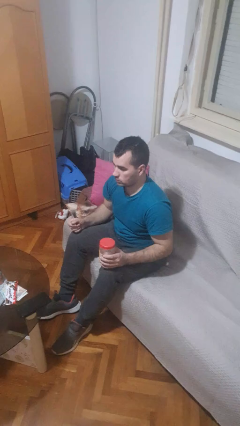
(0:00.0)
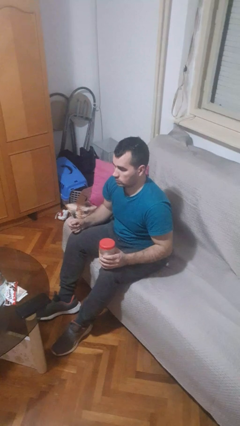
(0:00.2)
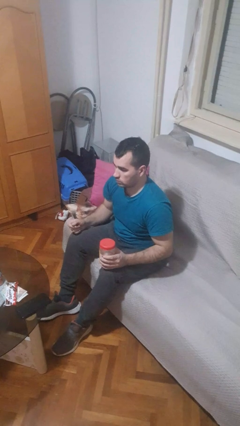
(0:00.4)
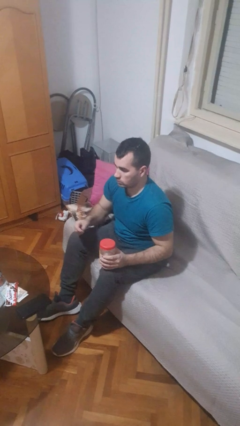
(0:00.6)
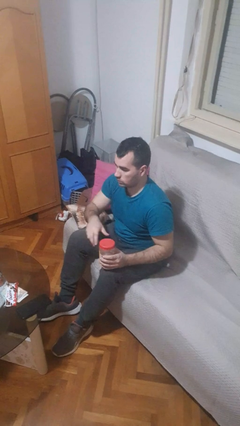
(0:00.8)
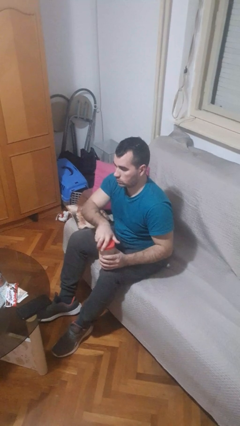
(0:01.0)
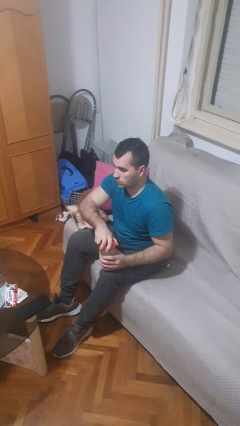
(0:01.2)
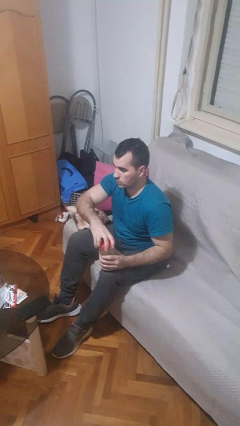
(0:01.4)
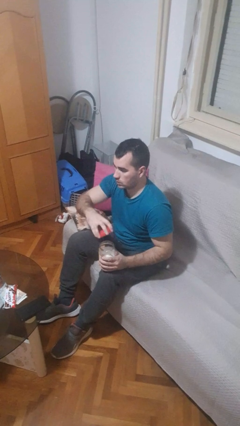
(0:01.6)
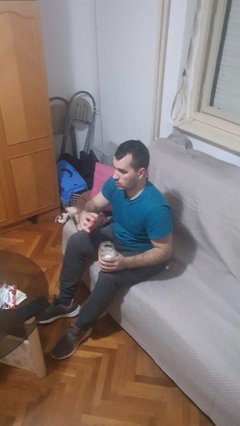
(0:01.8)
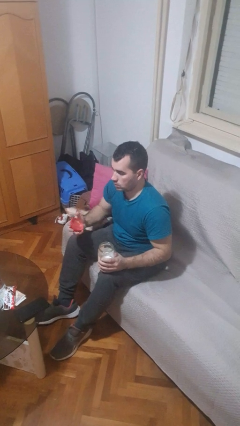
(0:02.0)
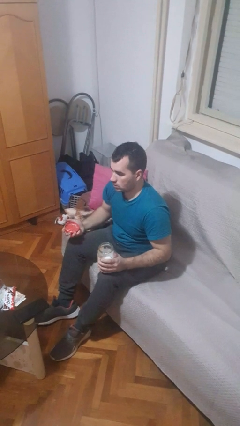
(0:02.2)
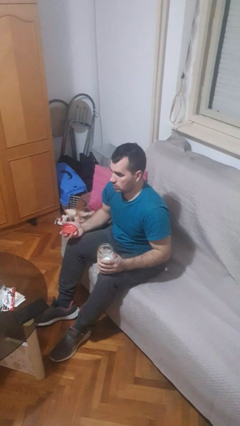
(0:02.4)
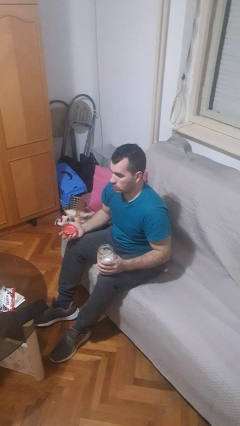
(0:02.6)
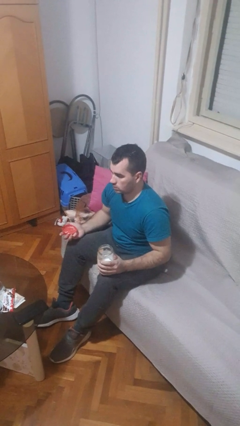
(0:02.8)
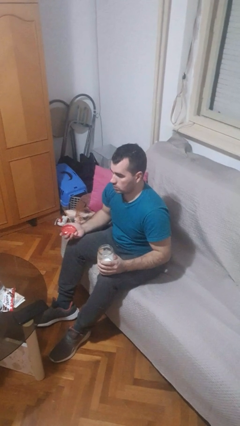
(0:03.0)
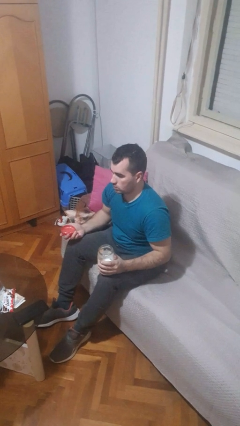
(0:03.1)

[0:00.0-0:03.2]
person opens jar

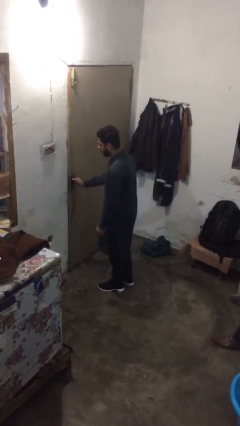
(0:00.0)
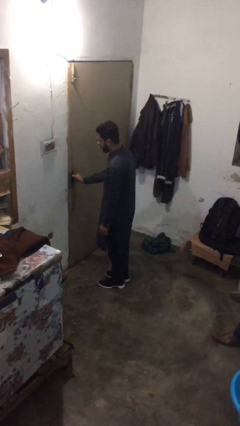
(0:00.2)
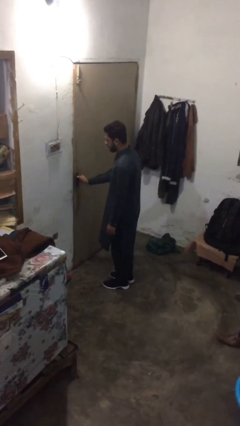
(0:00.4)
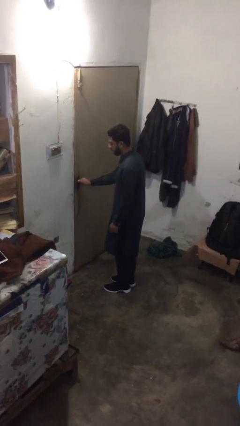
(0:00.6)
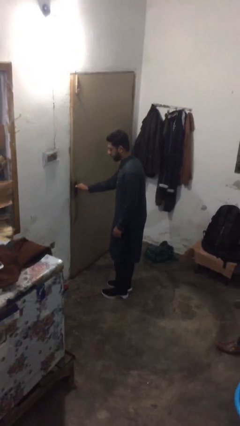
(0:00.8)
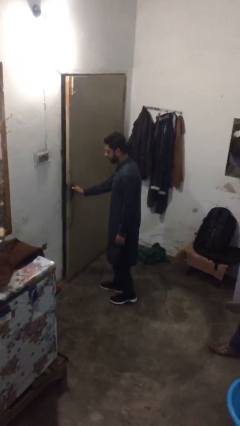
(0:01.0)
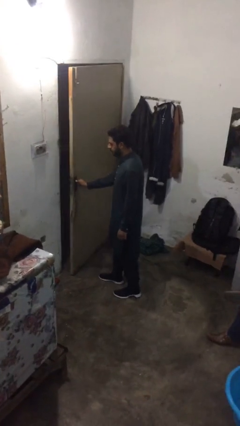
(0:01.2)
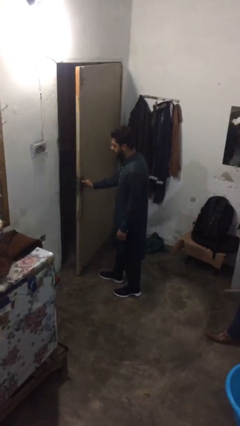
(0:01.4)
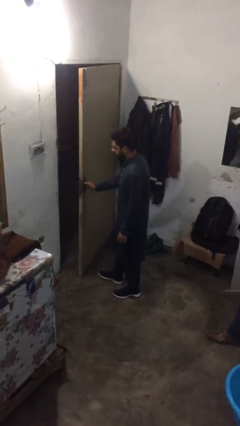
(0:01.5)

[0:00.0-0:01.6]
person opens facility door

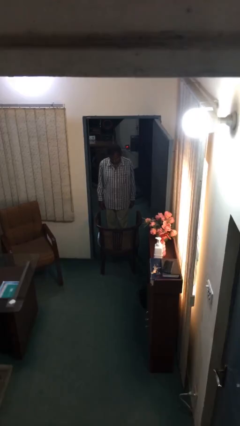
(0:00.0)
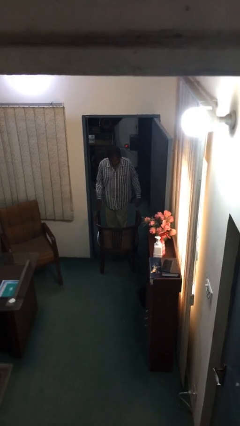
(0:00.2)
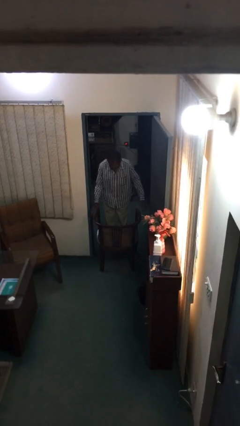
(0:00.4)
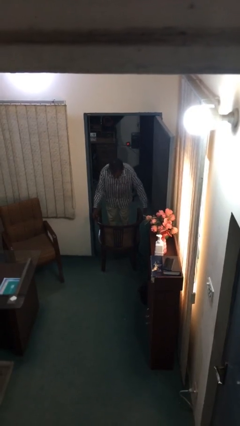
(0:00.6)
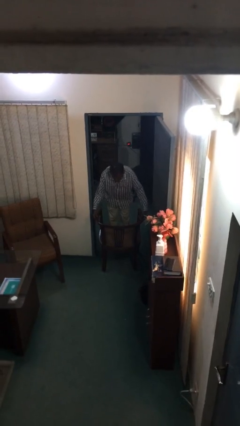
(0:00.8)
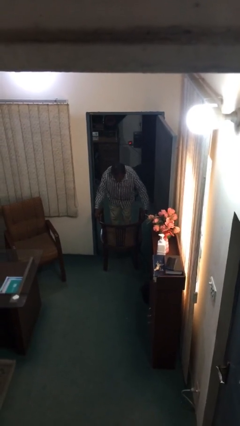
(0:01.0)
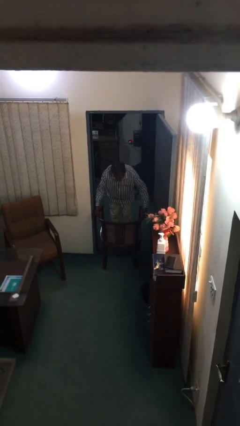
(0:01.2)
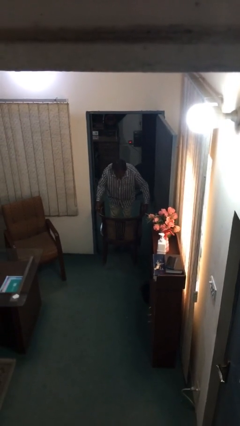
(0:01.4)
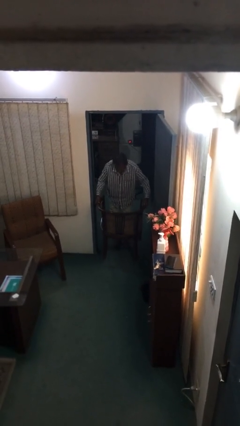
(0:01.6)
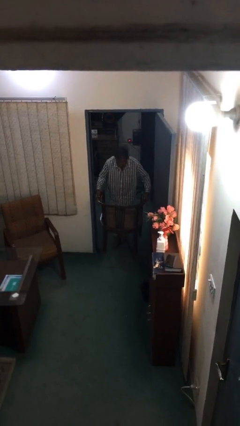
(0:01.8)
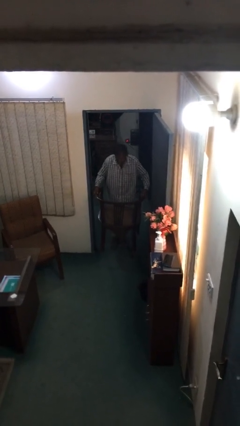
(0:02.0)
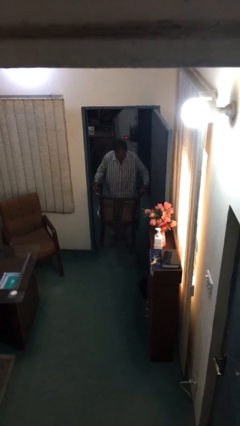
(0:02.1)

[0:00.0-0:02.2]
person picks up object from floor

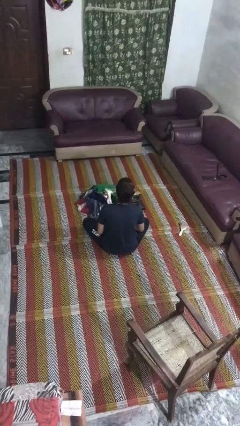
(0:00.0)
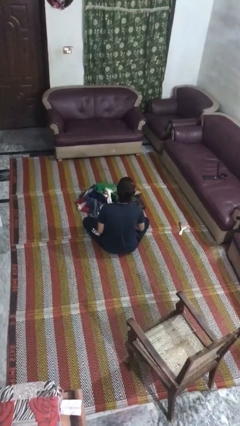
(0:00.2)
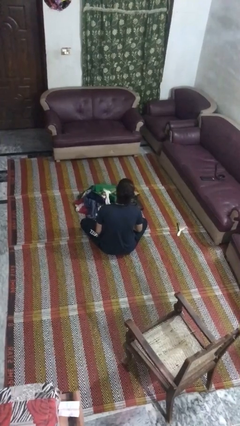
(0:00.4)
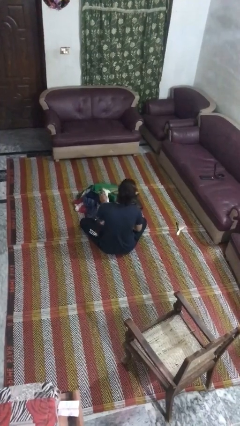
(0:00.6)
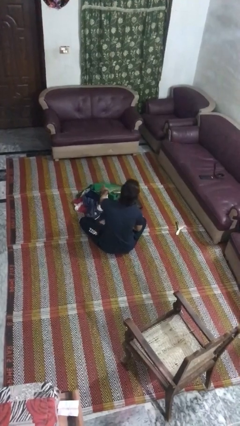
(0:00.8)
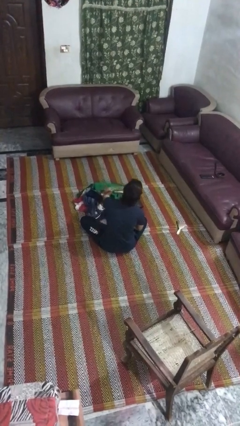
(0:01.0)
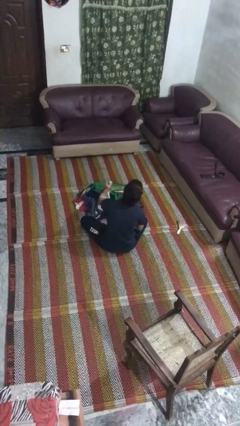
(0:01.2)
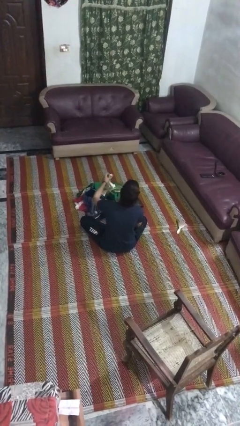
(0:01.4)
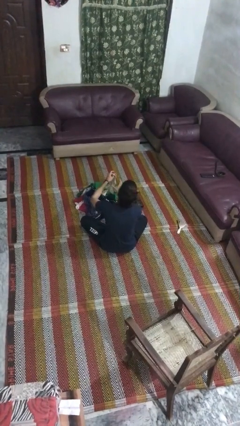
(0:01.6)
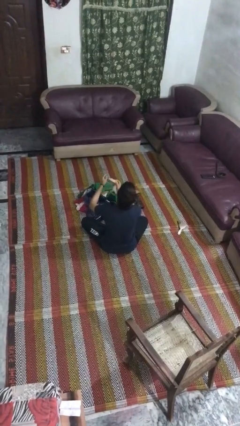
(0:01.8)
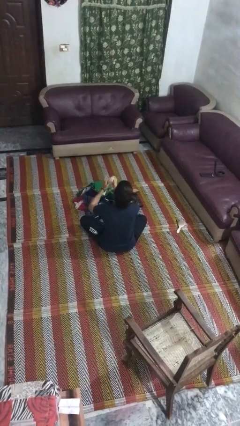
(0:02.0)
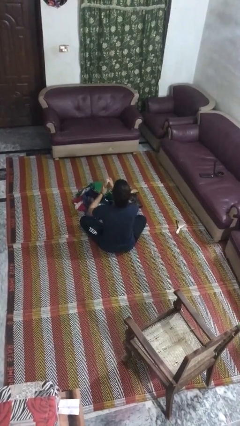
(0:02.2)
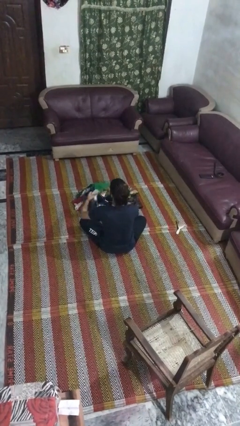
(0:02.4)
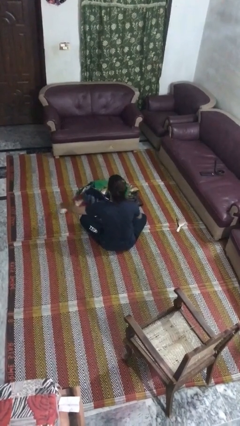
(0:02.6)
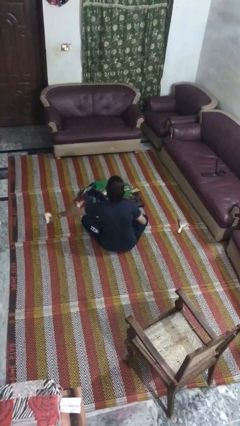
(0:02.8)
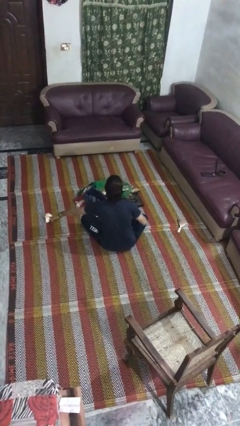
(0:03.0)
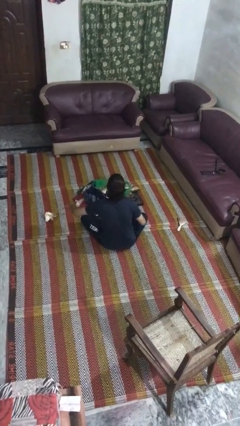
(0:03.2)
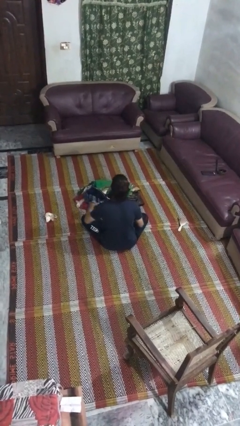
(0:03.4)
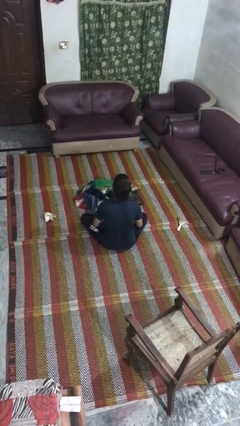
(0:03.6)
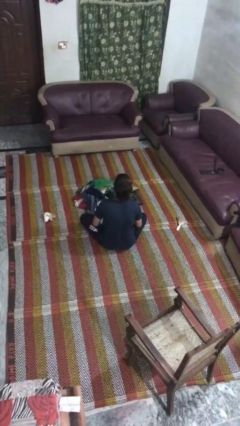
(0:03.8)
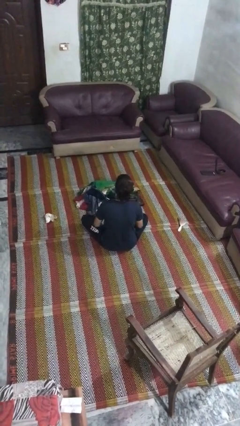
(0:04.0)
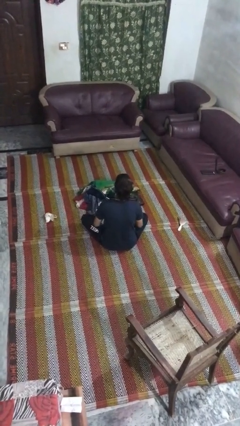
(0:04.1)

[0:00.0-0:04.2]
person folds socks

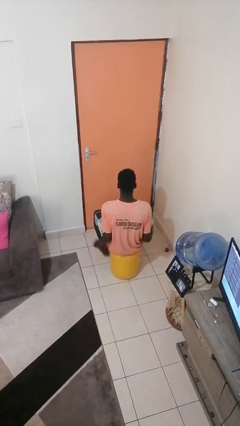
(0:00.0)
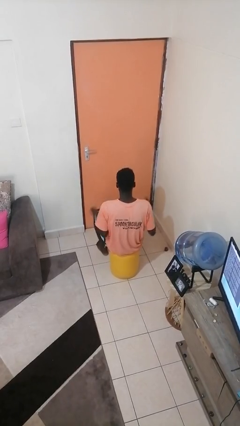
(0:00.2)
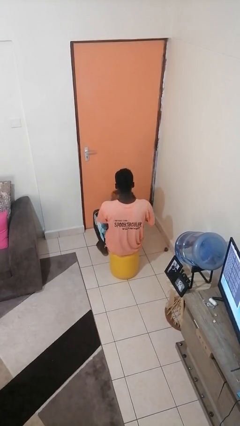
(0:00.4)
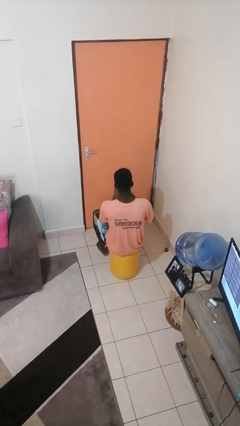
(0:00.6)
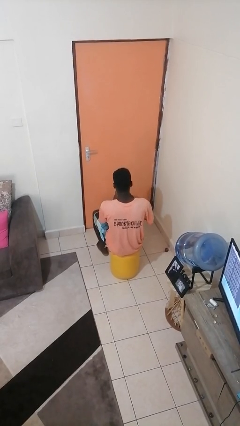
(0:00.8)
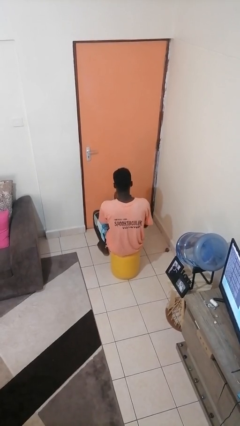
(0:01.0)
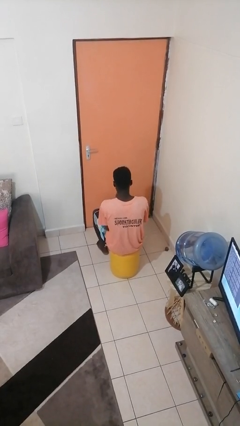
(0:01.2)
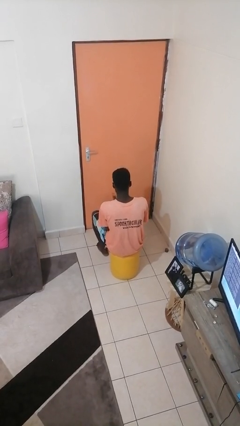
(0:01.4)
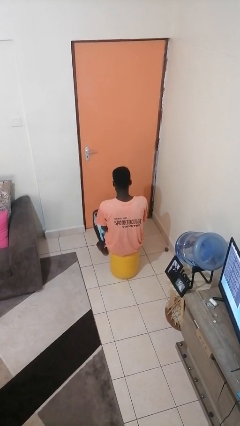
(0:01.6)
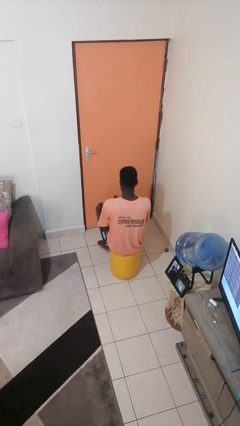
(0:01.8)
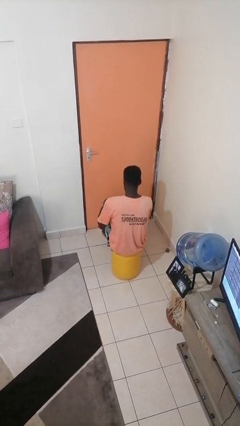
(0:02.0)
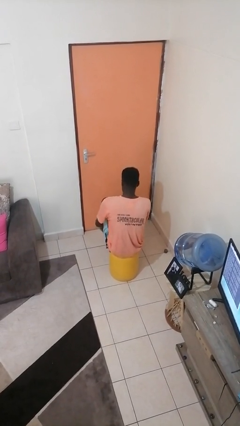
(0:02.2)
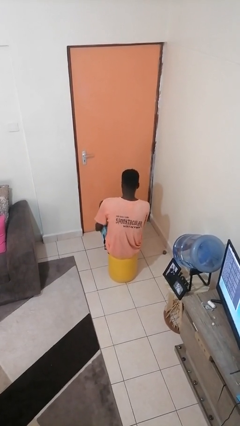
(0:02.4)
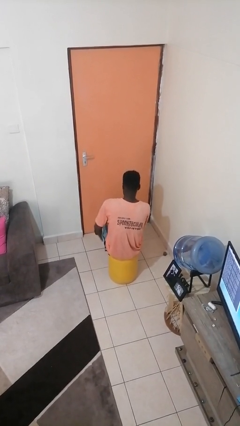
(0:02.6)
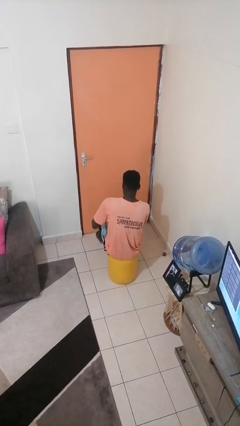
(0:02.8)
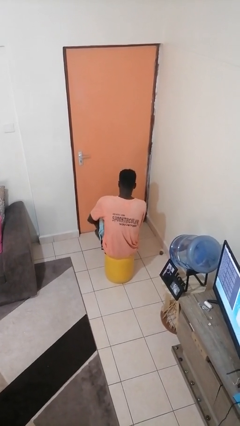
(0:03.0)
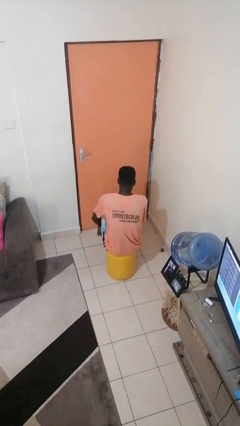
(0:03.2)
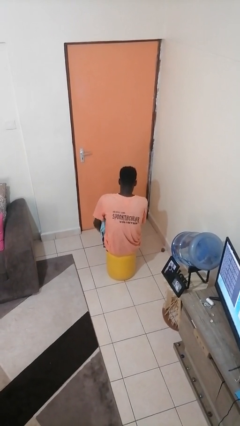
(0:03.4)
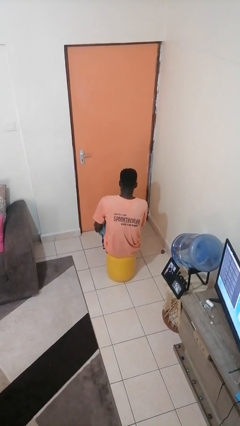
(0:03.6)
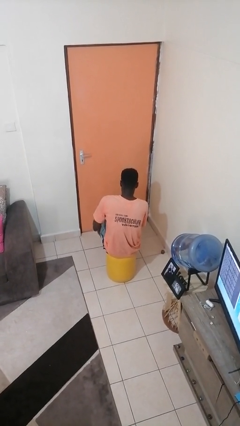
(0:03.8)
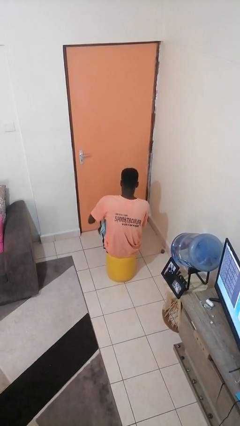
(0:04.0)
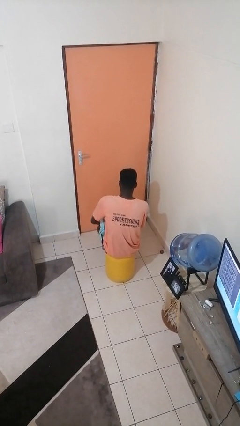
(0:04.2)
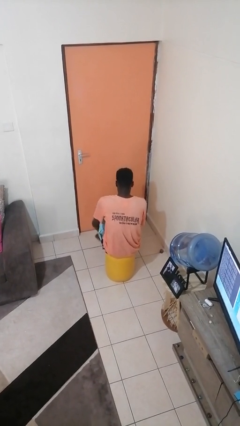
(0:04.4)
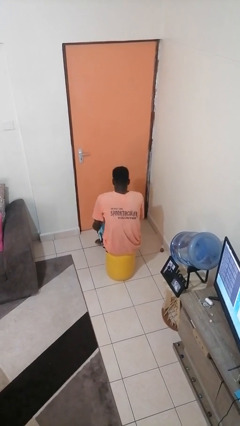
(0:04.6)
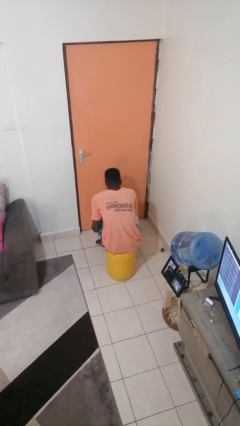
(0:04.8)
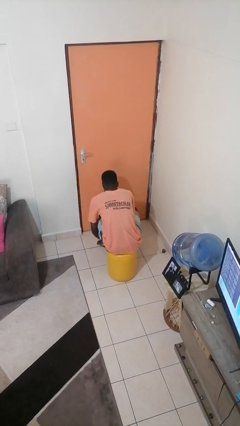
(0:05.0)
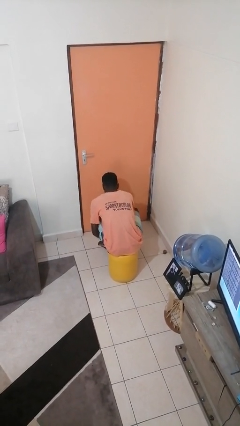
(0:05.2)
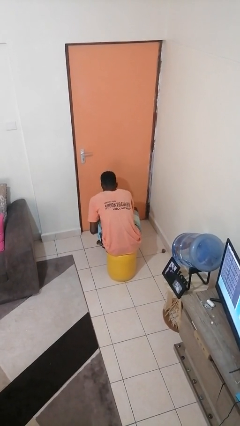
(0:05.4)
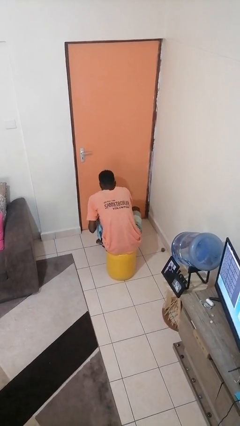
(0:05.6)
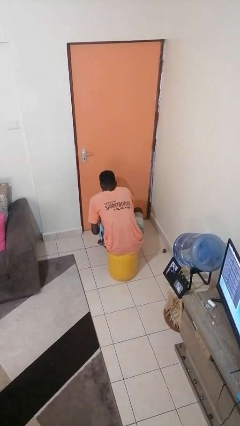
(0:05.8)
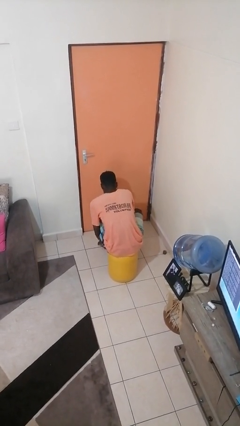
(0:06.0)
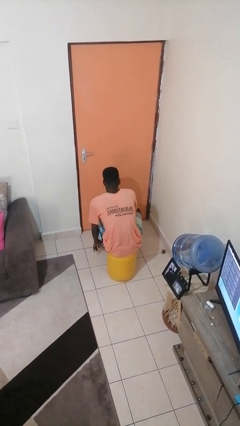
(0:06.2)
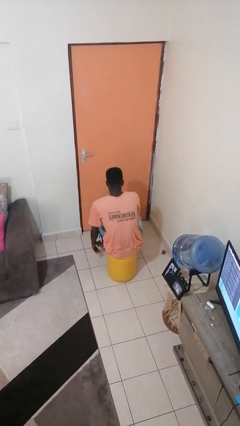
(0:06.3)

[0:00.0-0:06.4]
person applies sunscreen
